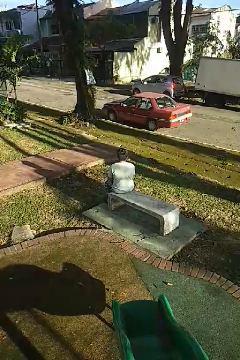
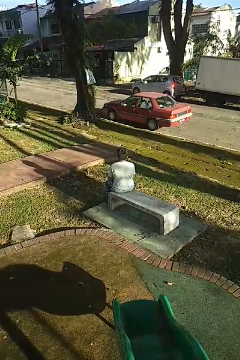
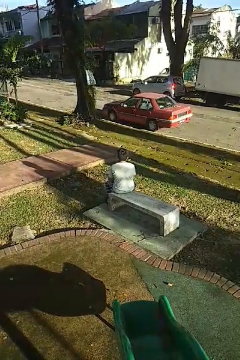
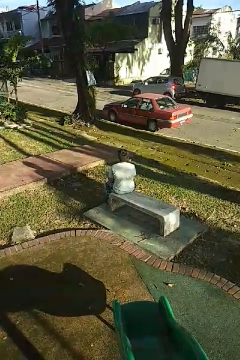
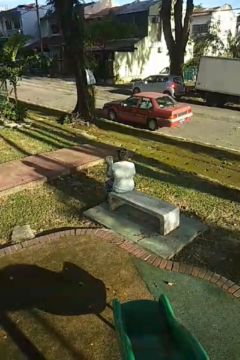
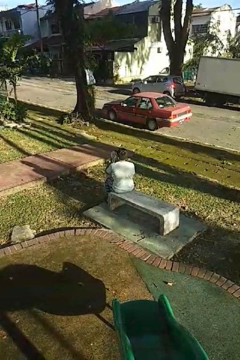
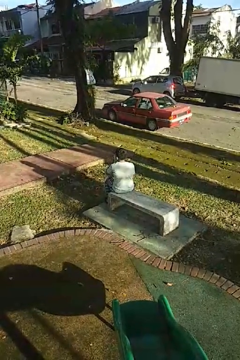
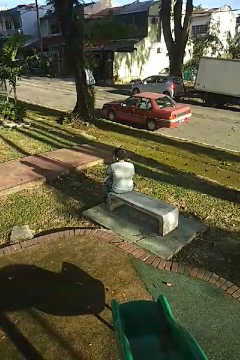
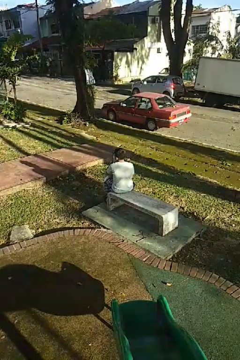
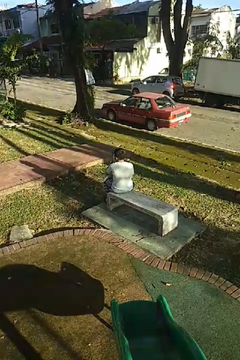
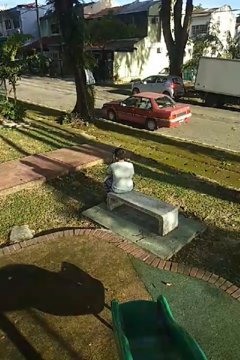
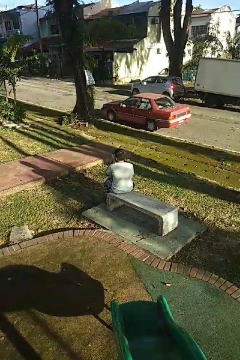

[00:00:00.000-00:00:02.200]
person blows nose

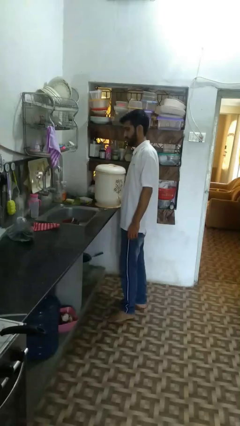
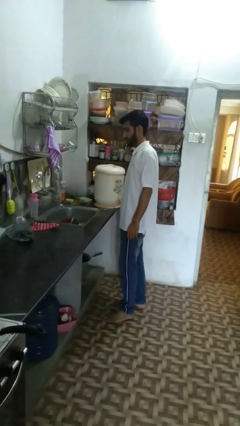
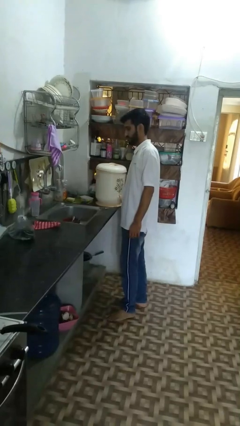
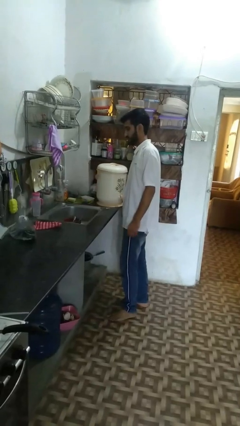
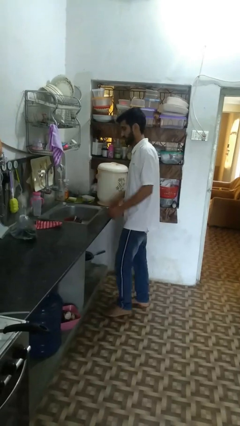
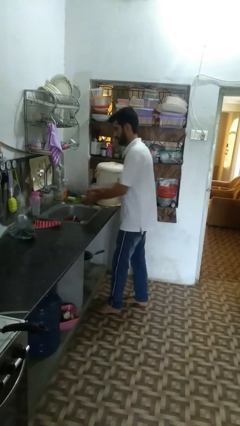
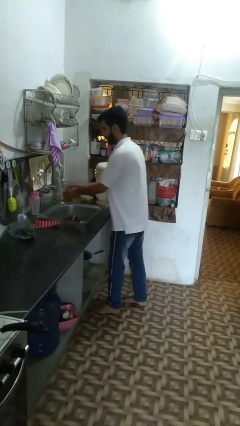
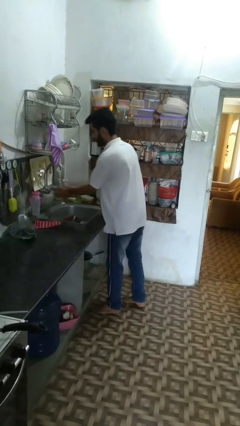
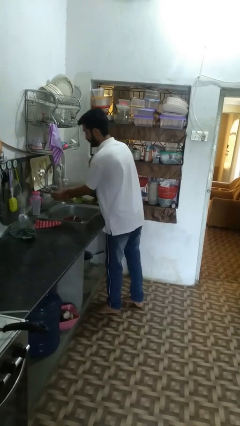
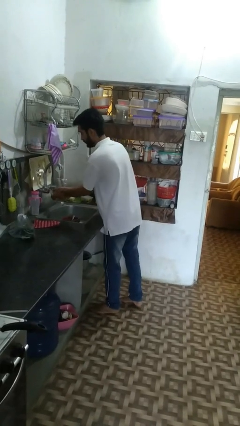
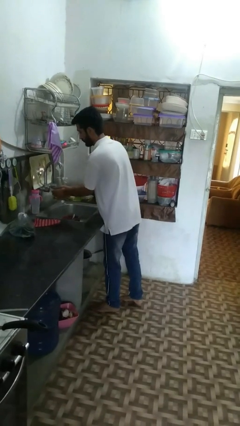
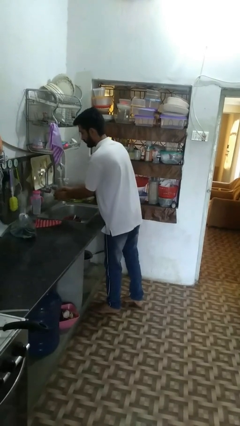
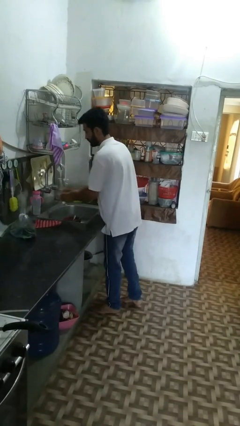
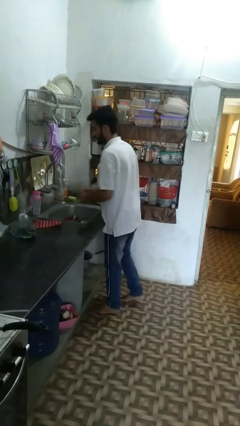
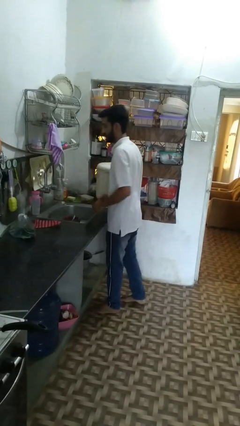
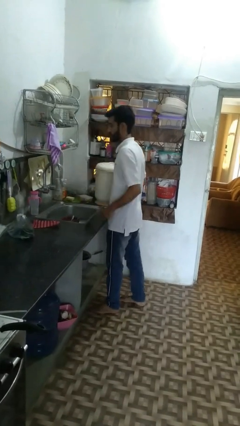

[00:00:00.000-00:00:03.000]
person washes hands

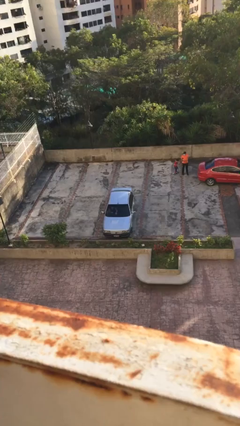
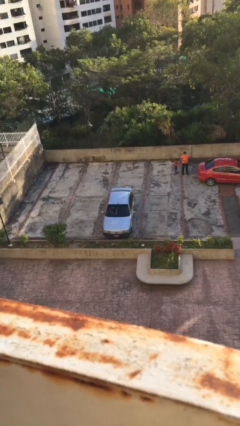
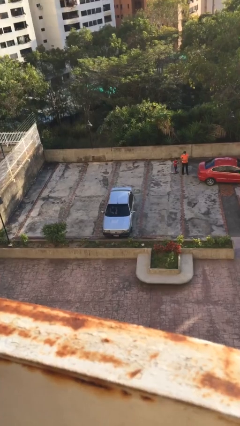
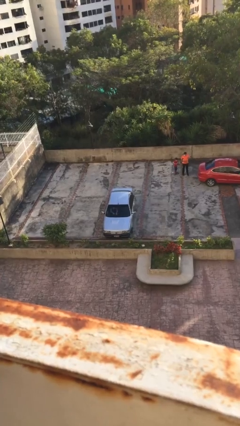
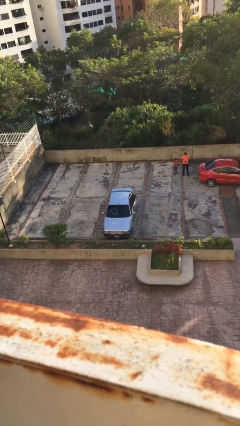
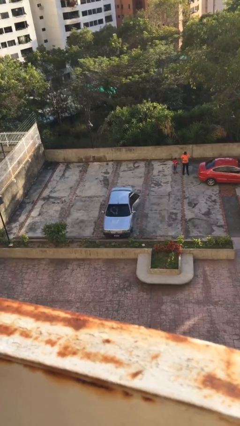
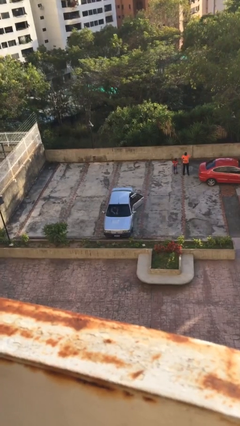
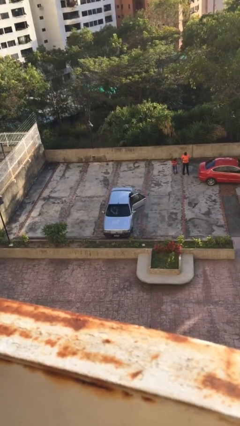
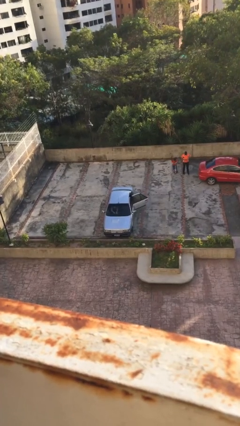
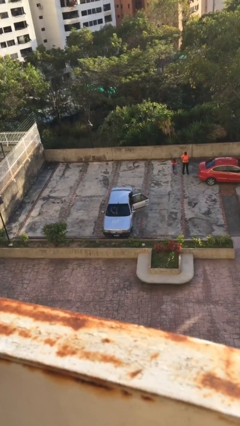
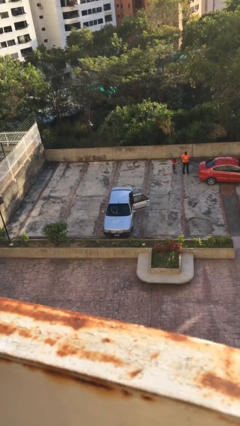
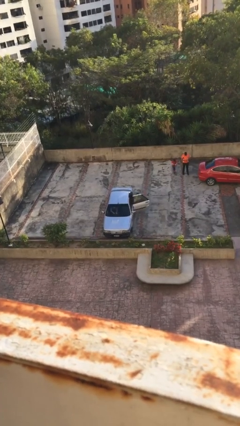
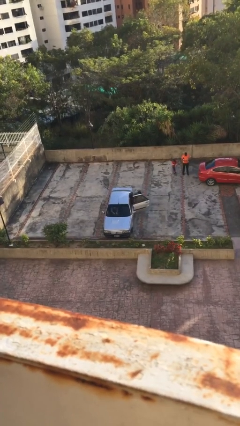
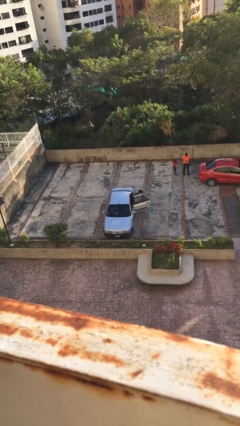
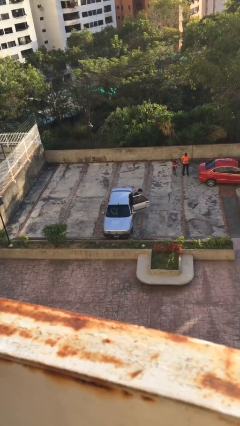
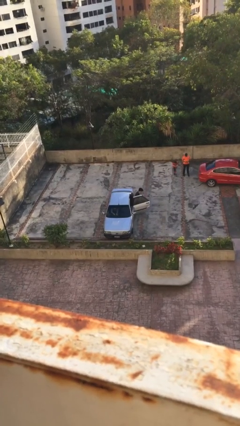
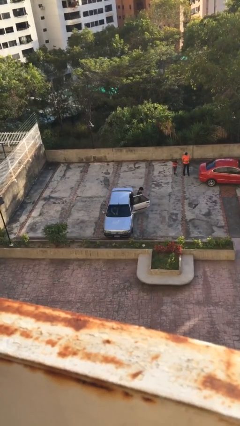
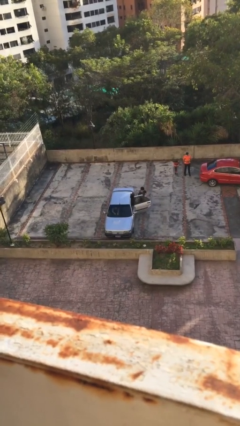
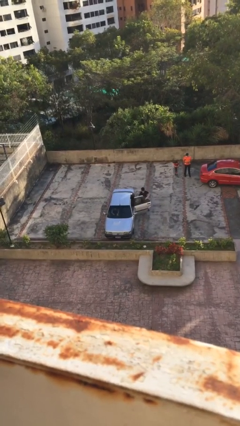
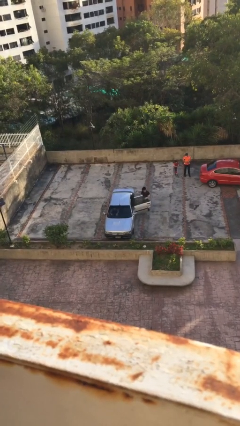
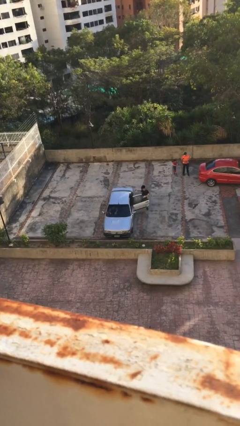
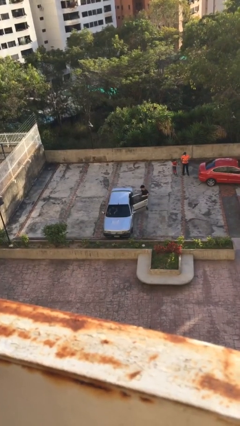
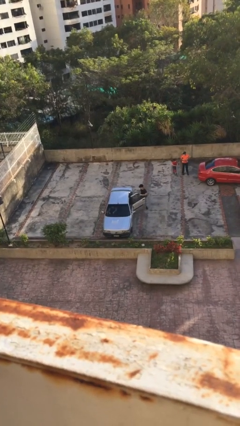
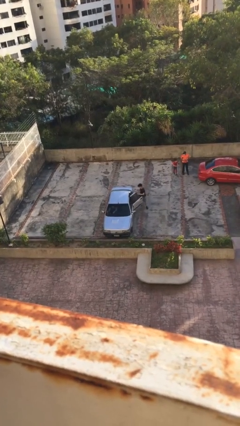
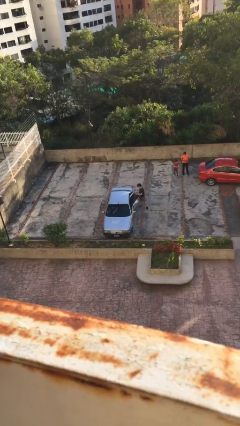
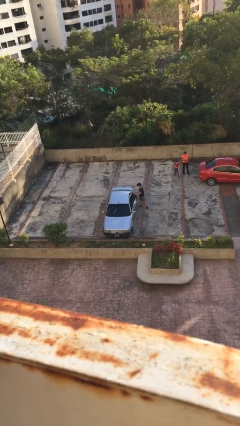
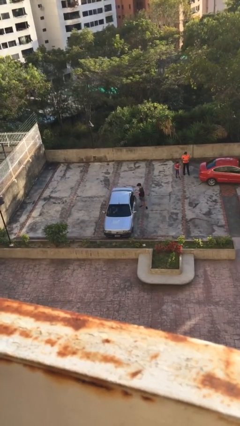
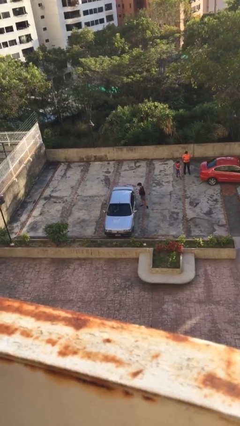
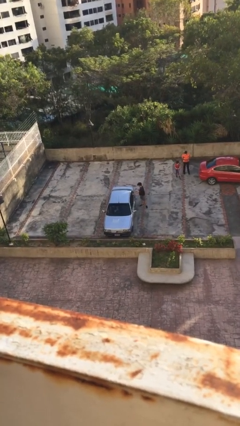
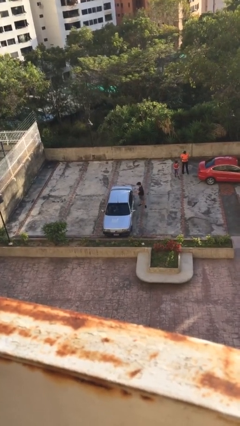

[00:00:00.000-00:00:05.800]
car drops off person

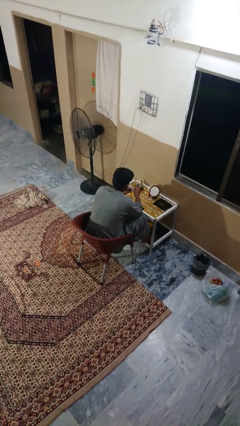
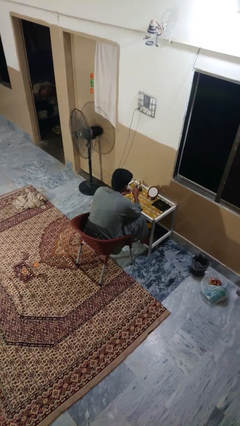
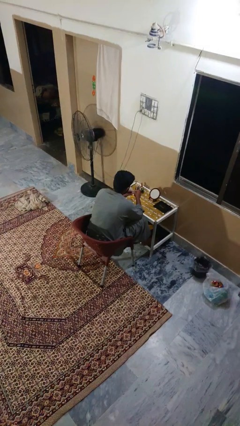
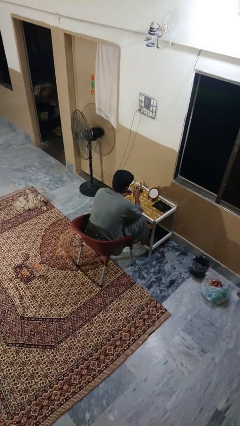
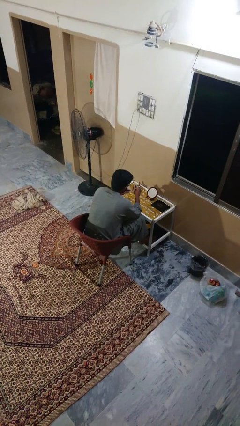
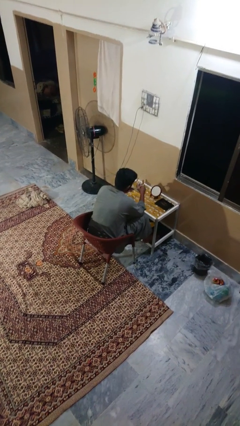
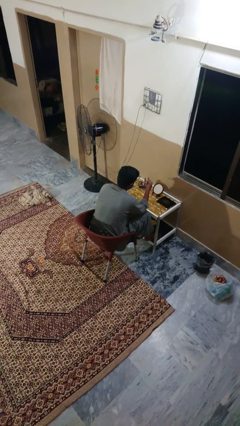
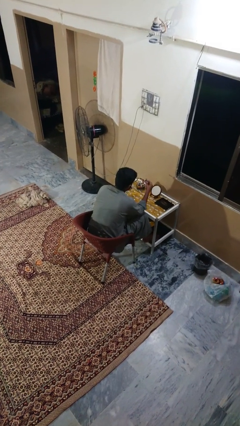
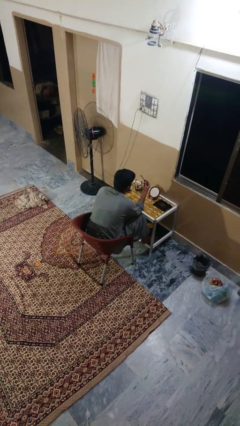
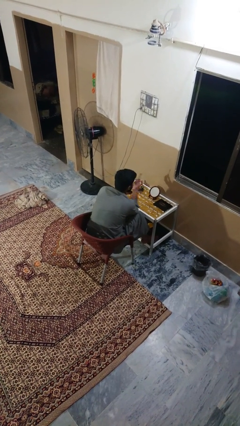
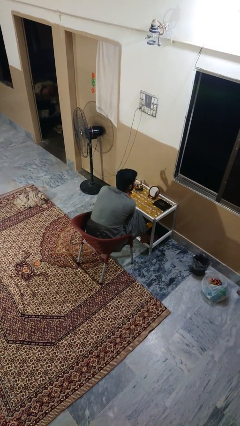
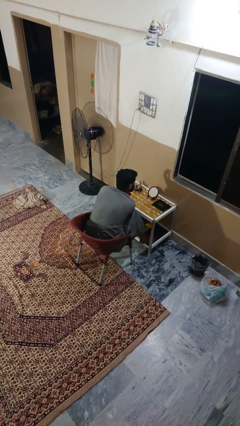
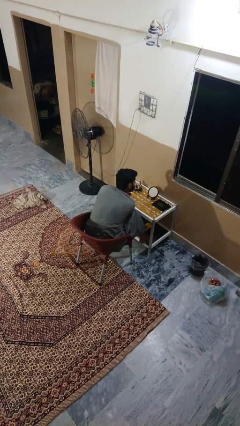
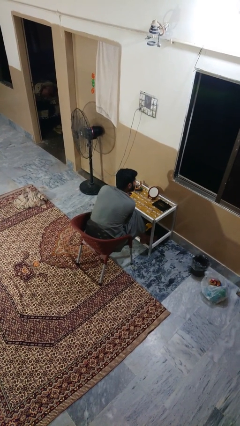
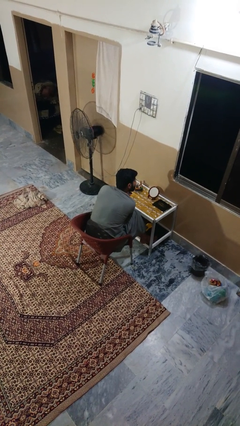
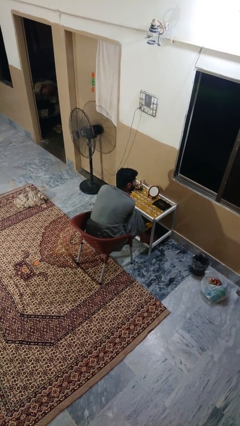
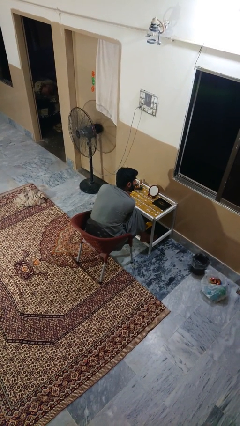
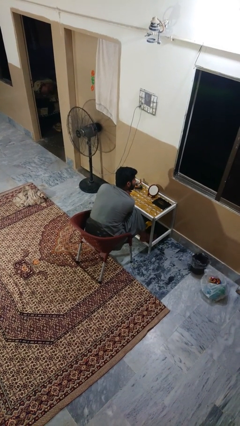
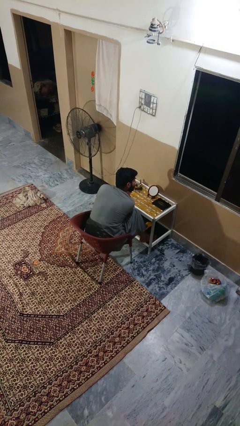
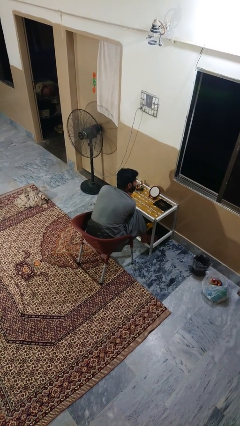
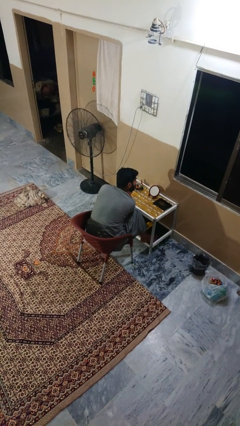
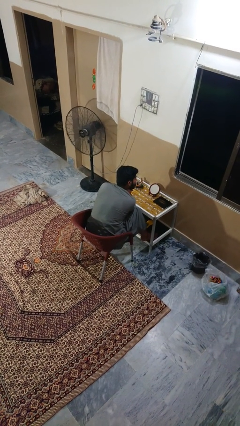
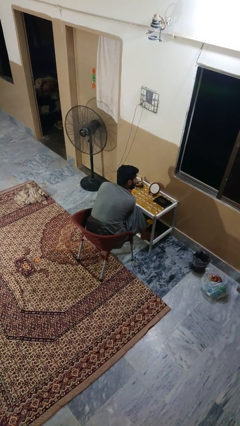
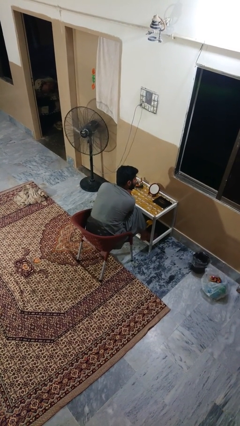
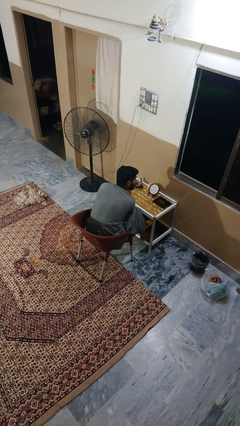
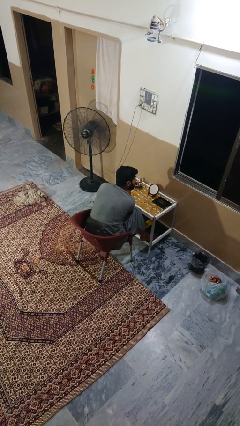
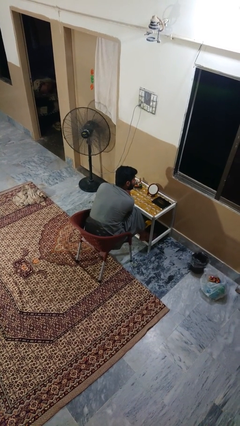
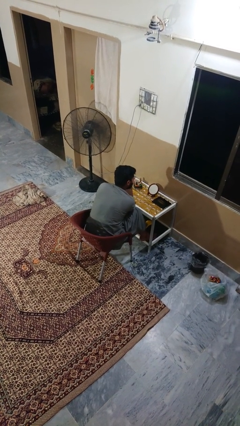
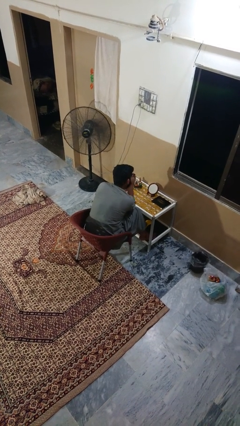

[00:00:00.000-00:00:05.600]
person applies eye makeup

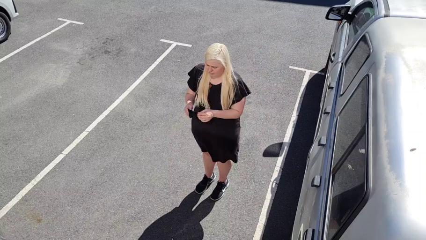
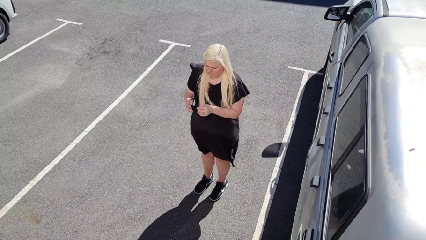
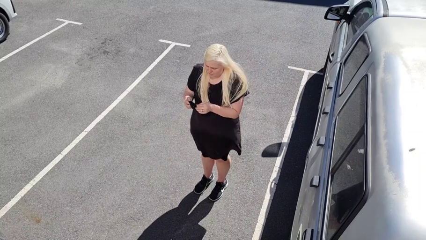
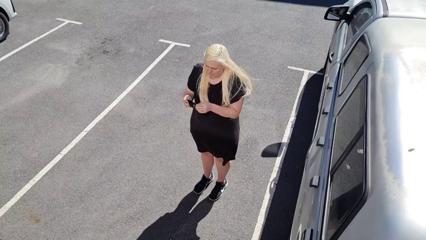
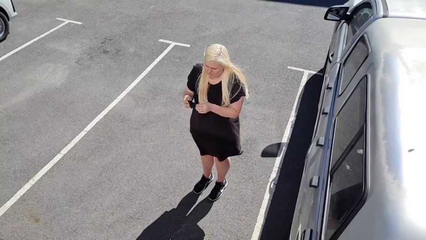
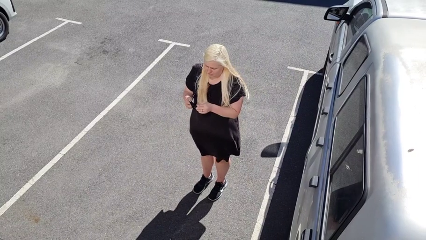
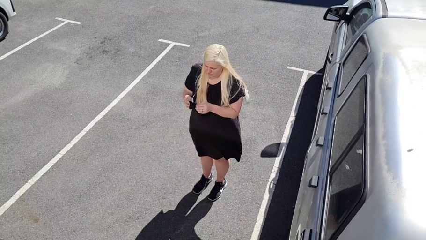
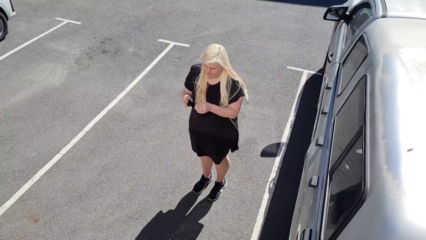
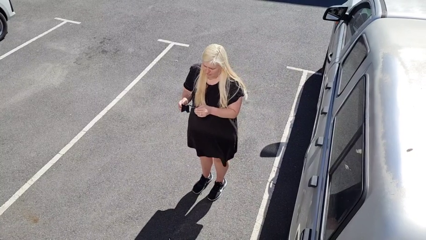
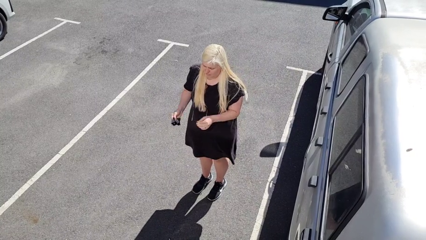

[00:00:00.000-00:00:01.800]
person cleans eyeglasses
